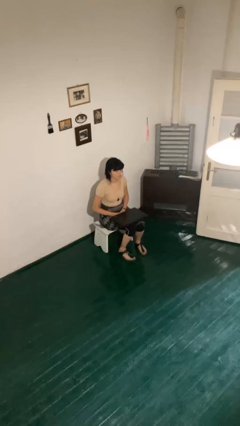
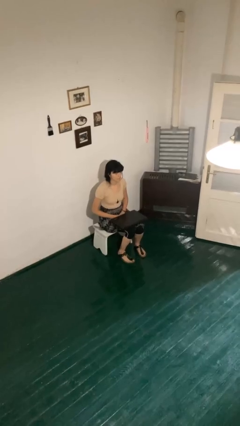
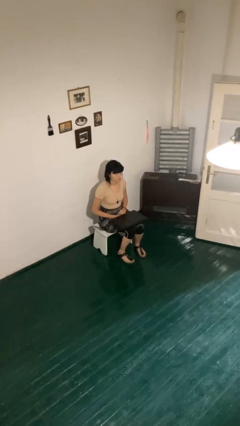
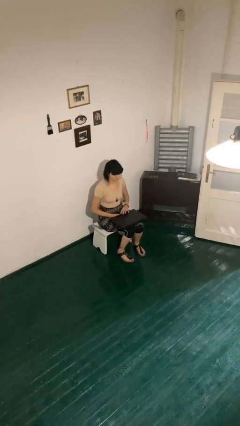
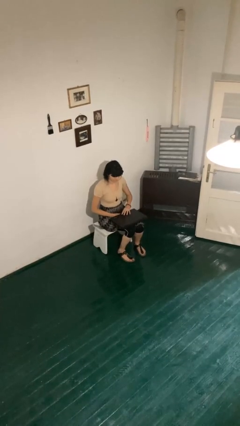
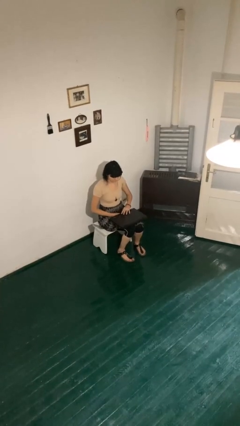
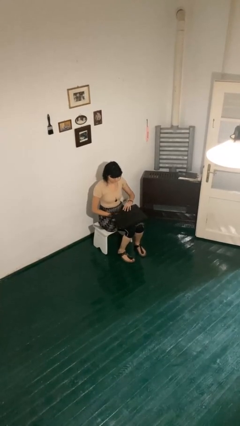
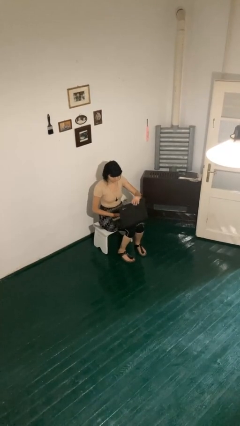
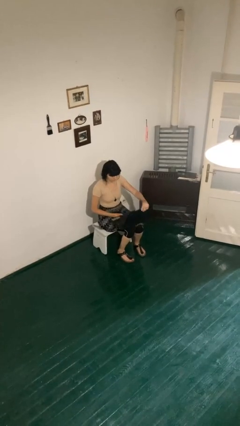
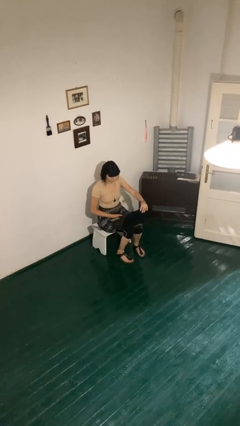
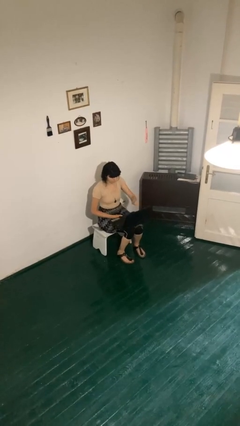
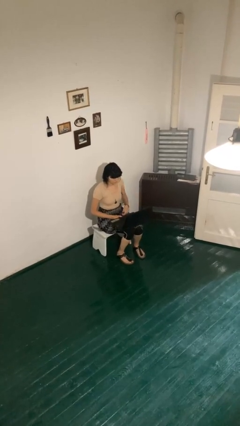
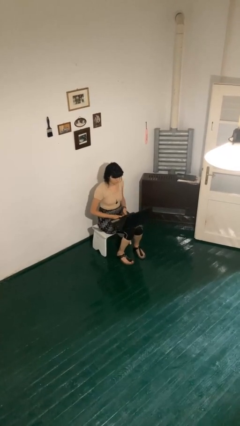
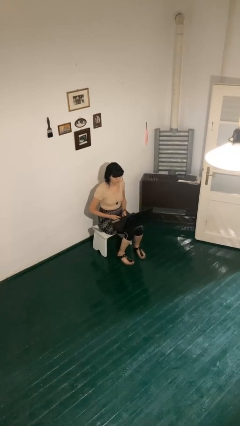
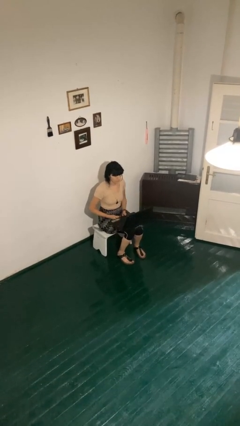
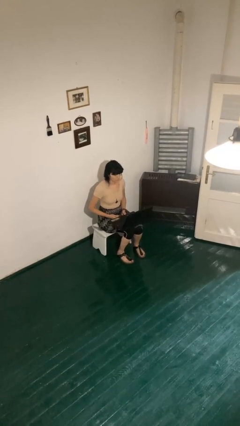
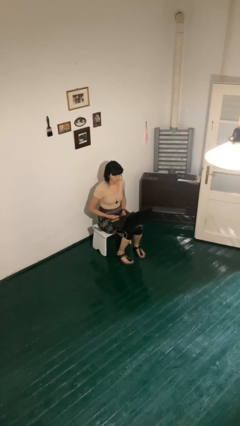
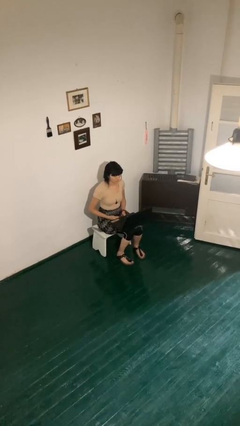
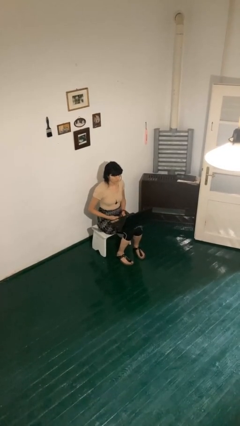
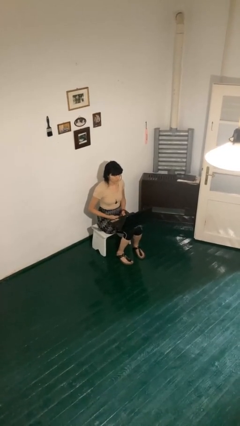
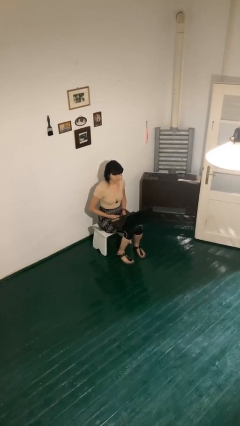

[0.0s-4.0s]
person opens laptop

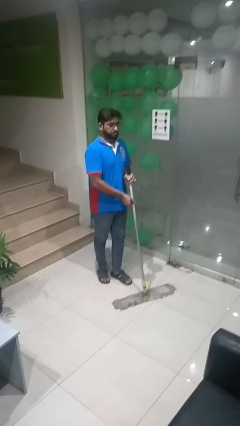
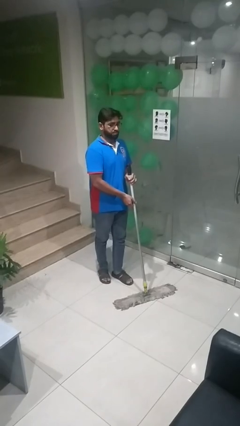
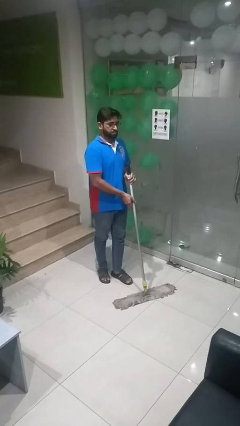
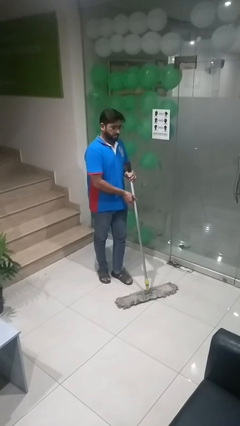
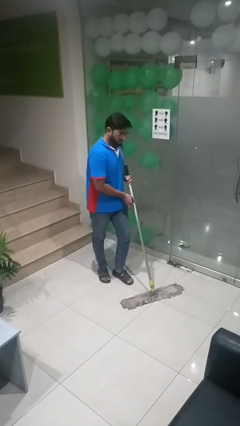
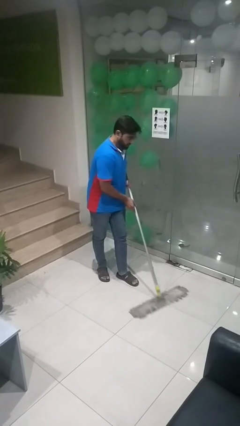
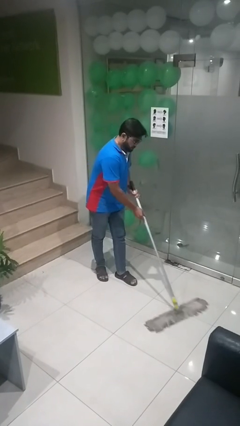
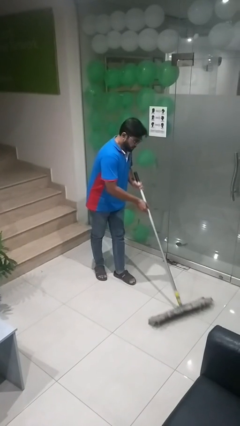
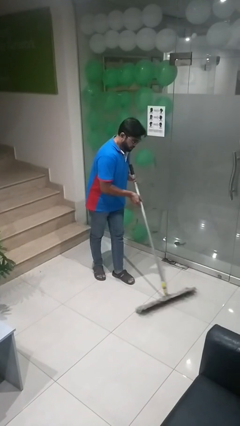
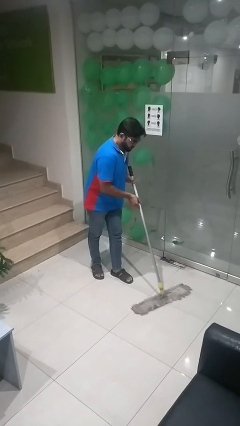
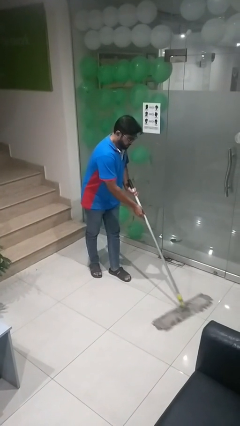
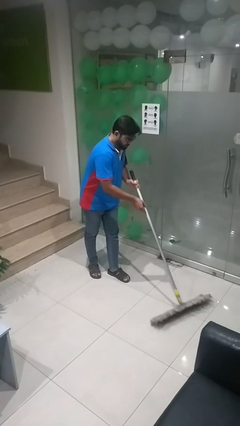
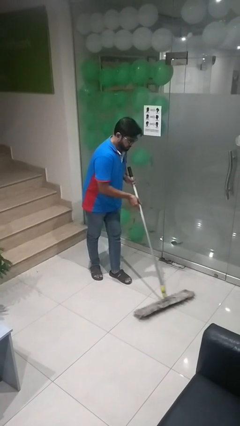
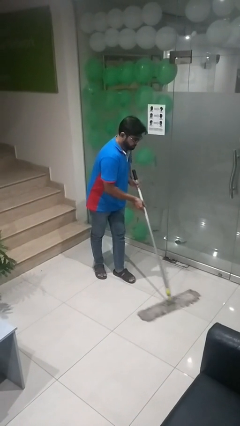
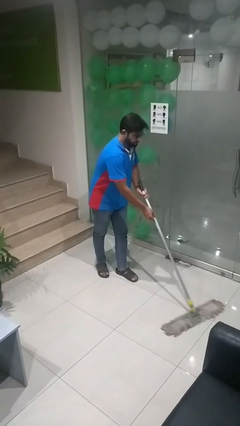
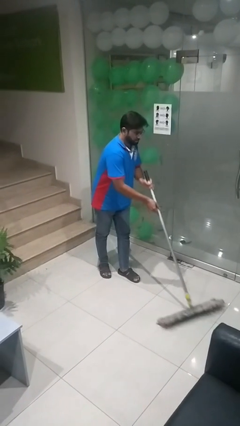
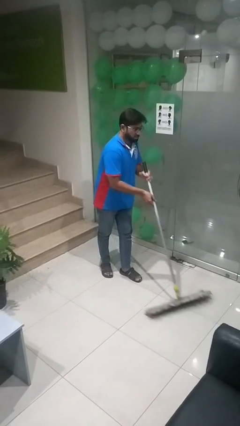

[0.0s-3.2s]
person mops

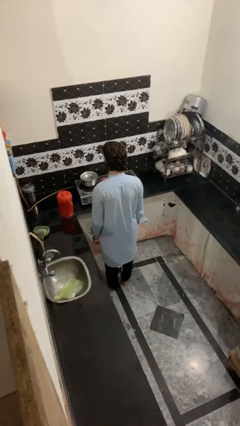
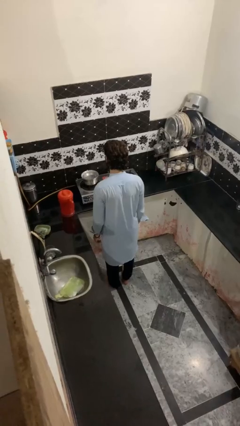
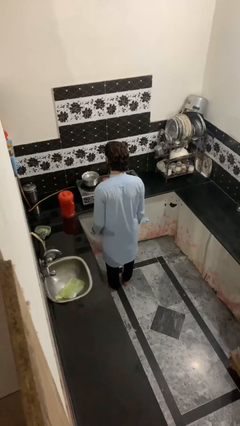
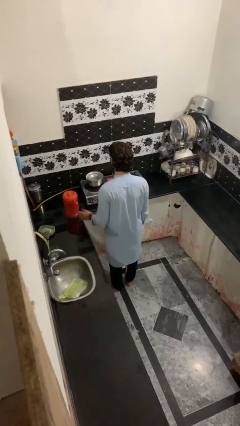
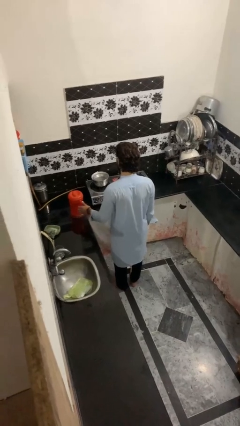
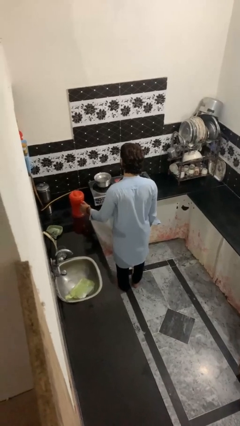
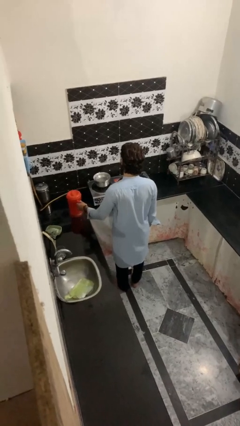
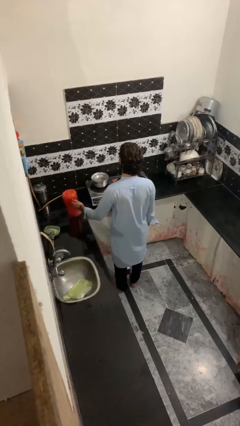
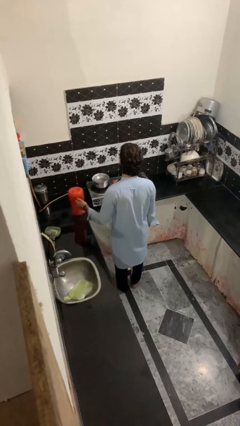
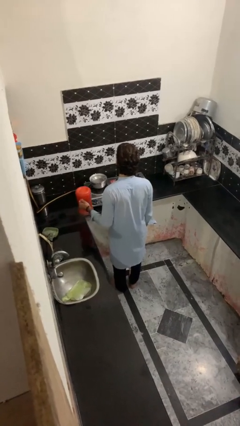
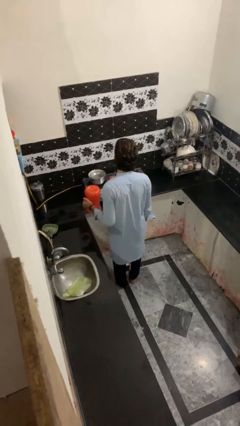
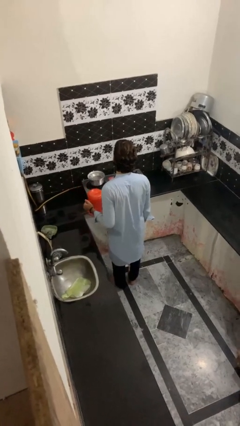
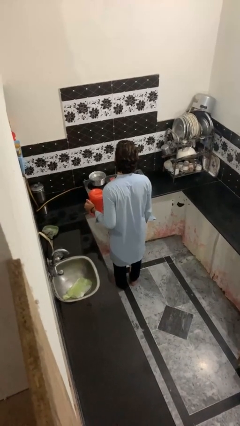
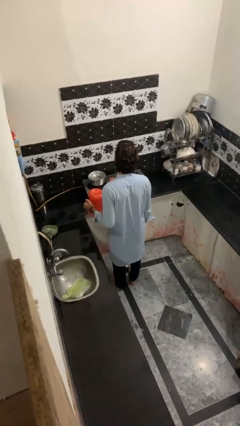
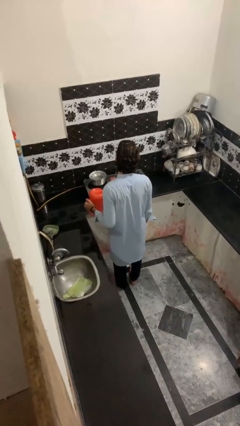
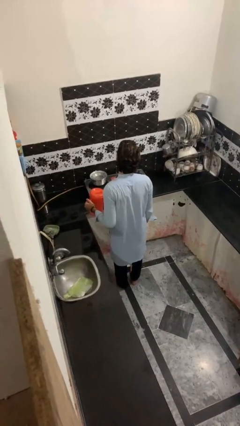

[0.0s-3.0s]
person picks up object from countertop

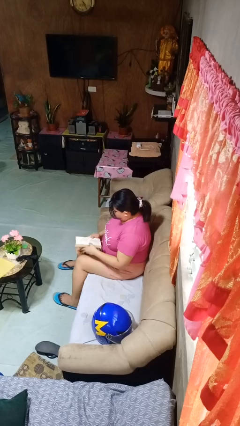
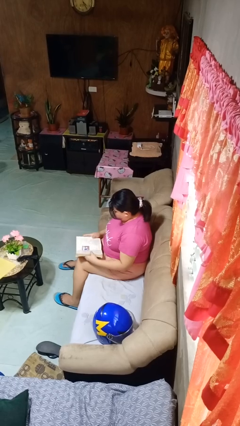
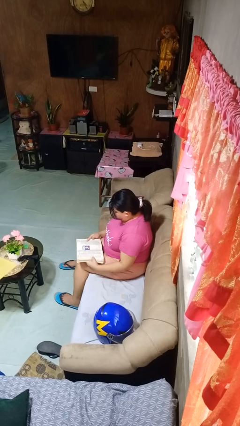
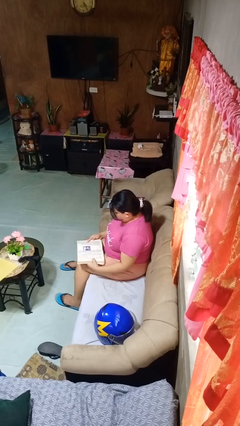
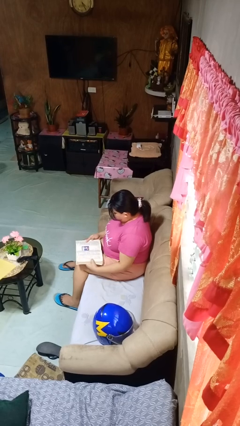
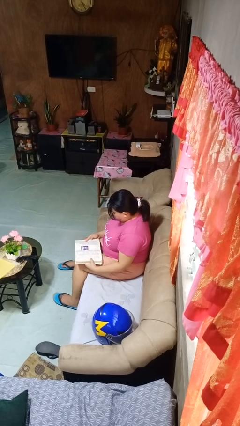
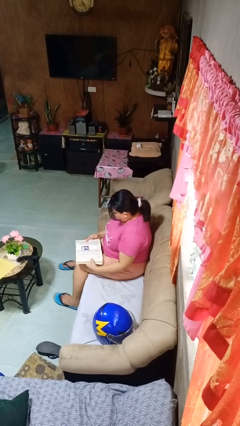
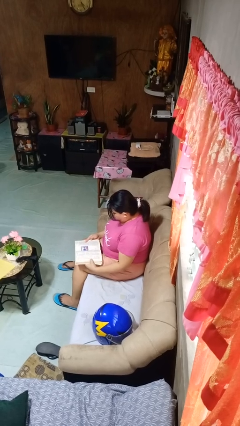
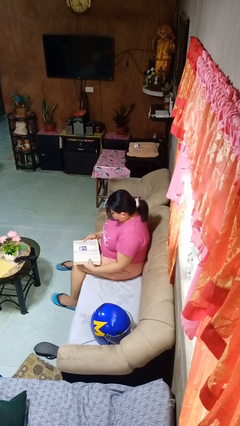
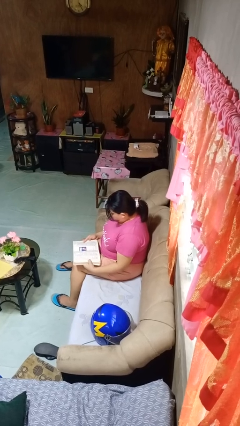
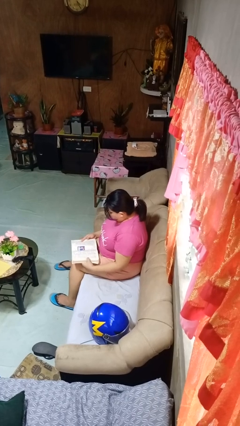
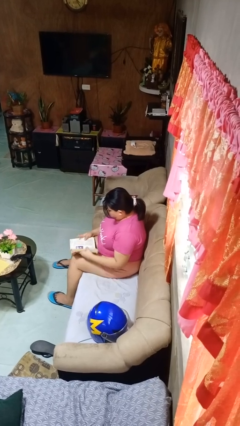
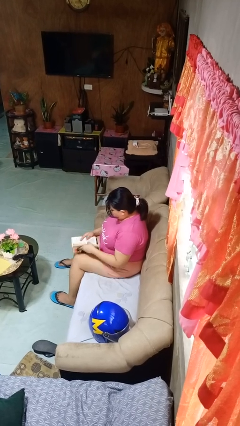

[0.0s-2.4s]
person reads book

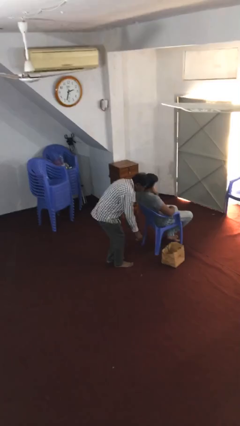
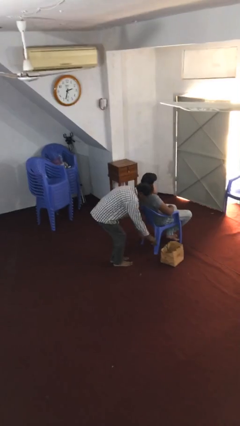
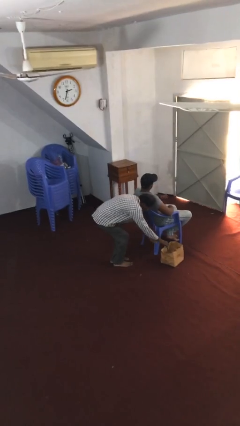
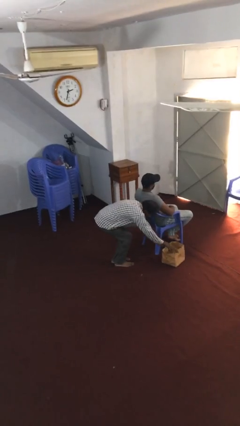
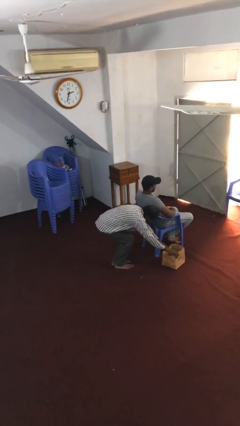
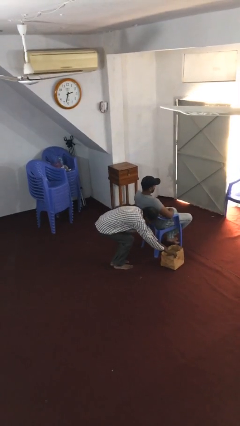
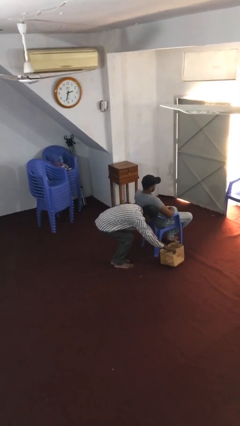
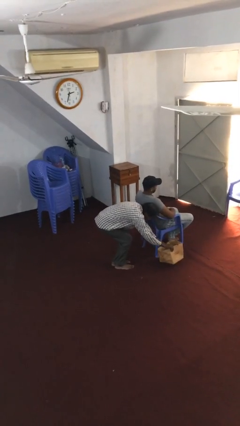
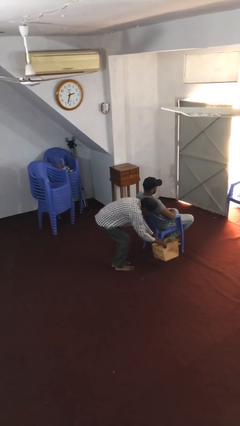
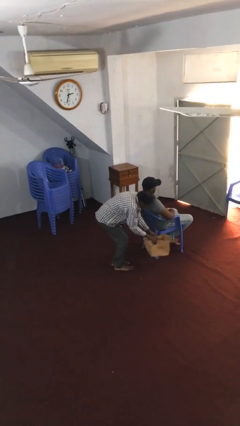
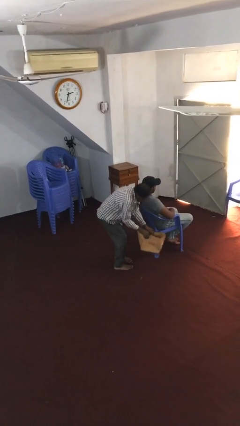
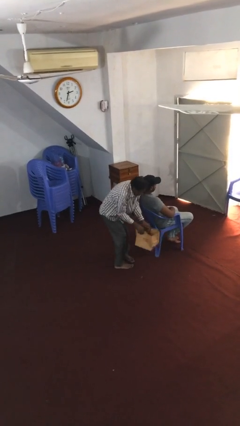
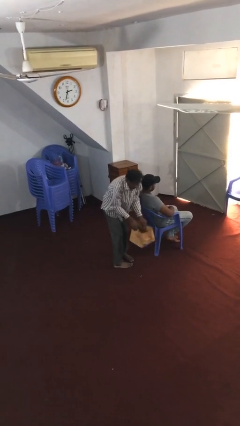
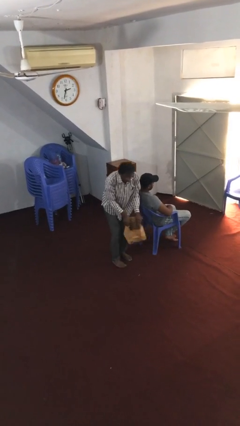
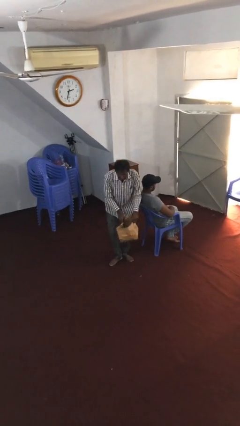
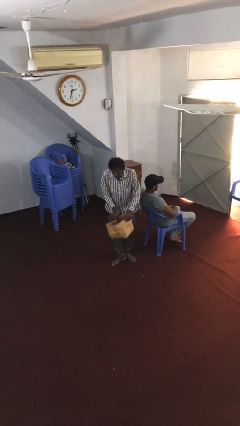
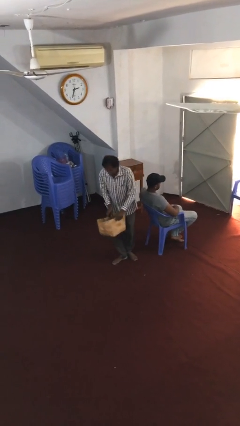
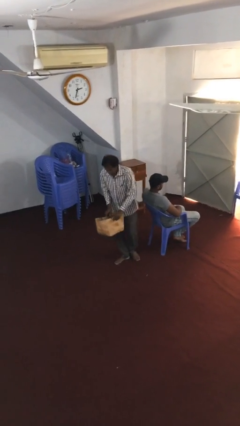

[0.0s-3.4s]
person steals object from person

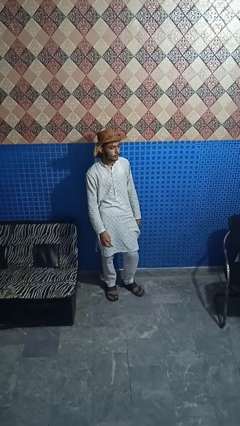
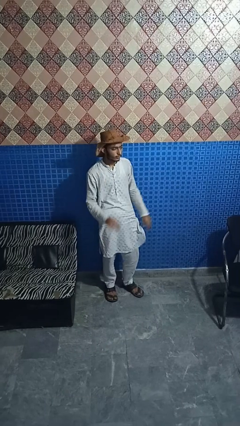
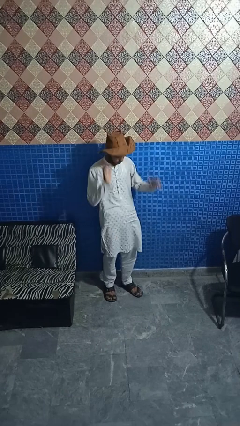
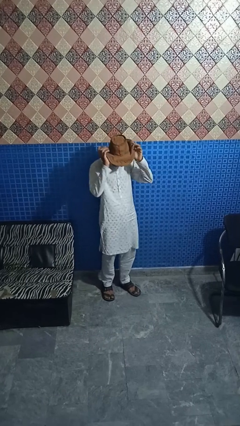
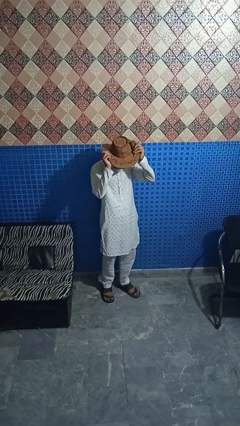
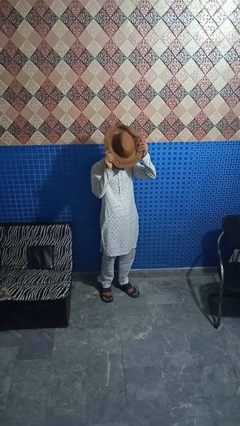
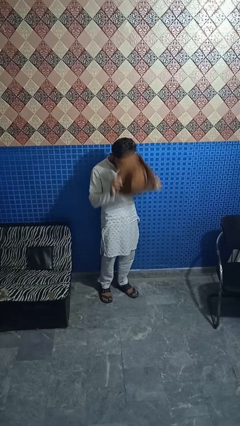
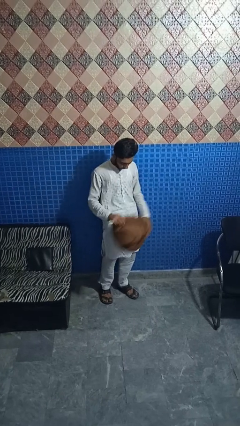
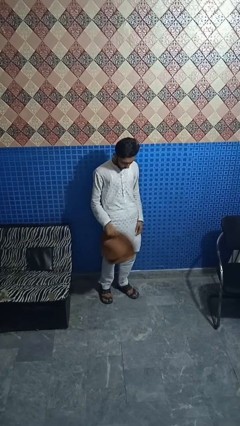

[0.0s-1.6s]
person takes off hat
